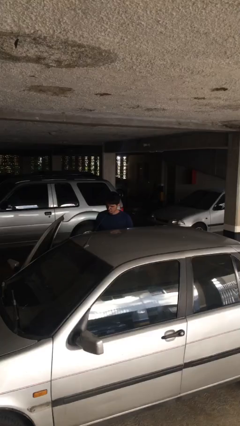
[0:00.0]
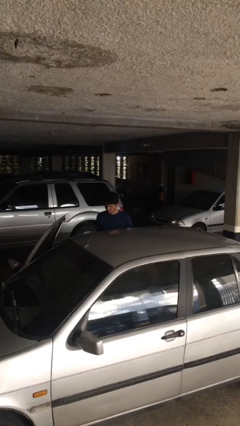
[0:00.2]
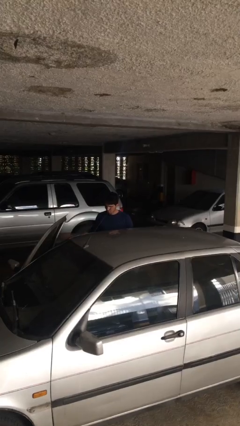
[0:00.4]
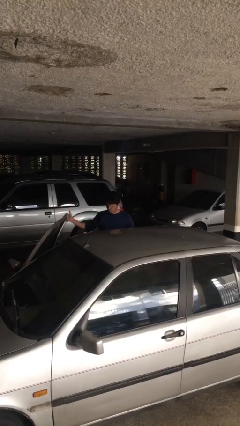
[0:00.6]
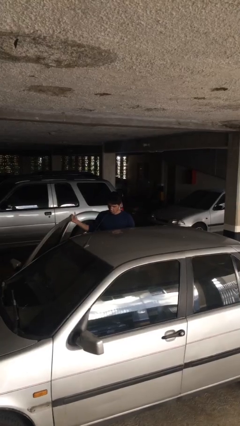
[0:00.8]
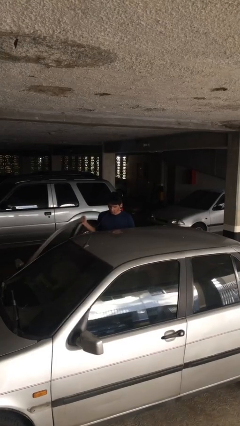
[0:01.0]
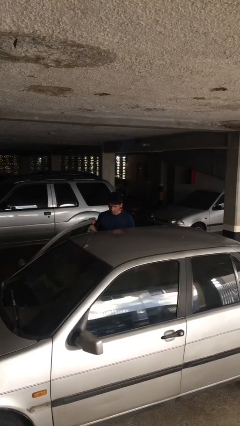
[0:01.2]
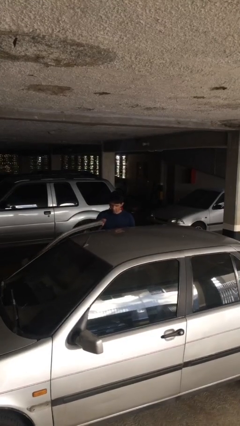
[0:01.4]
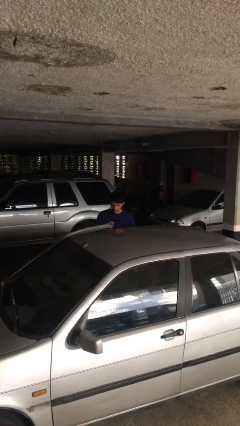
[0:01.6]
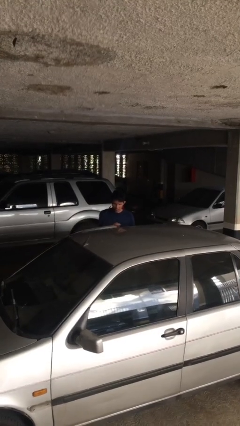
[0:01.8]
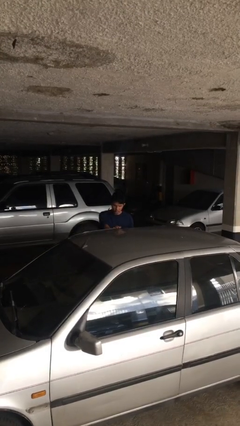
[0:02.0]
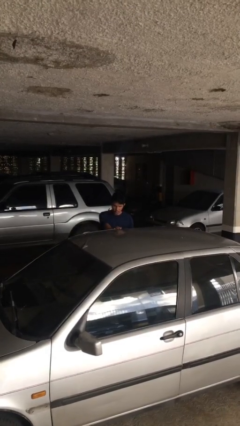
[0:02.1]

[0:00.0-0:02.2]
person closes car door

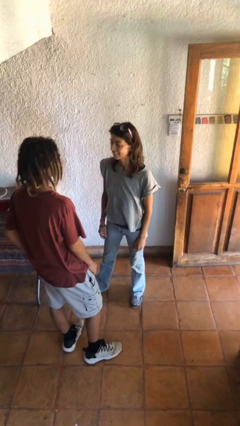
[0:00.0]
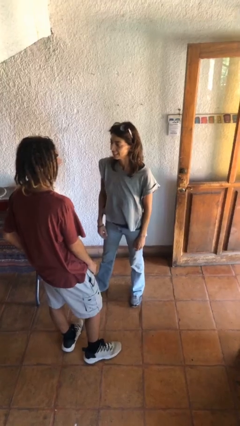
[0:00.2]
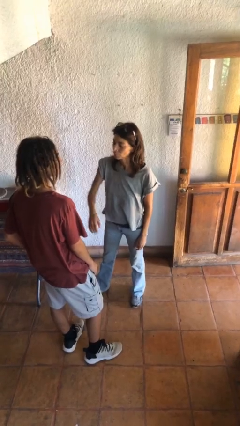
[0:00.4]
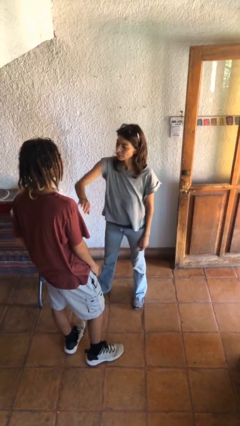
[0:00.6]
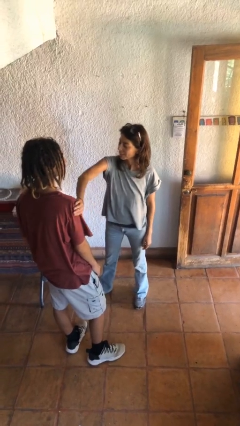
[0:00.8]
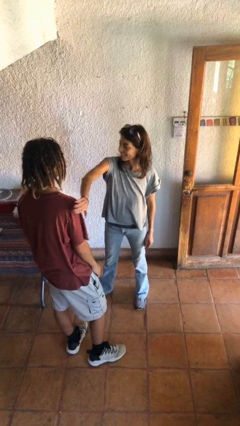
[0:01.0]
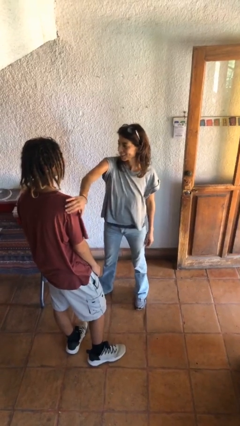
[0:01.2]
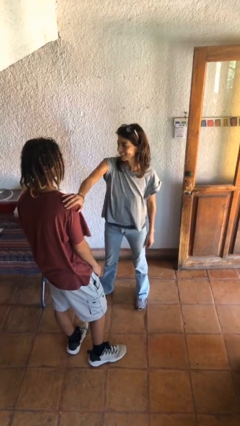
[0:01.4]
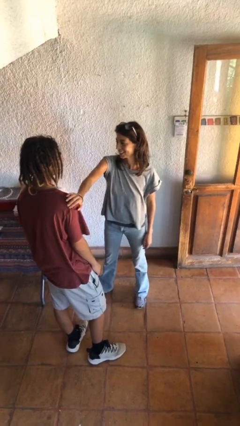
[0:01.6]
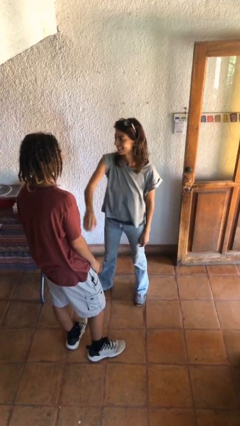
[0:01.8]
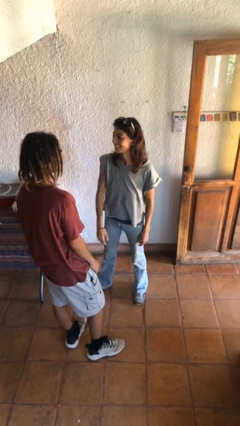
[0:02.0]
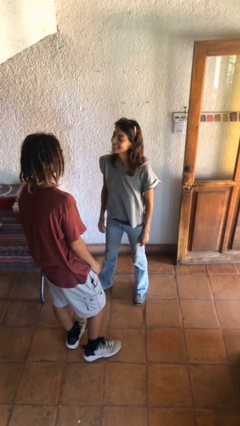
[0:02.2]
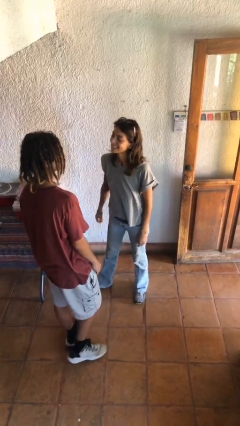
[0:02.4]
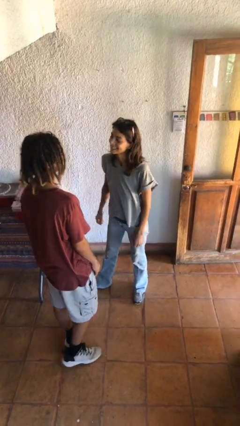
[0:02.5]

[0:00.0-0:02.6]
person pounds shoulders of person

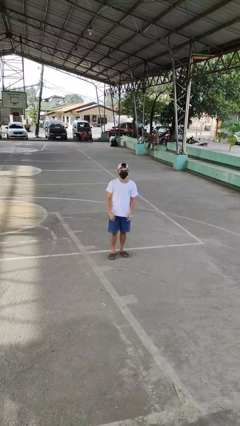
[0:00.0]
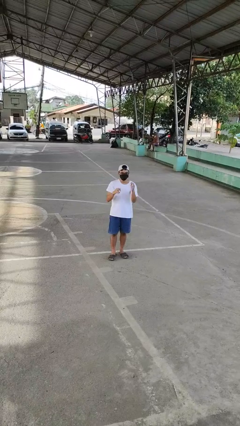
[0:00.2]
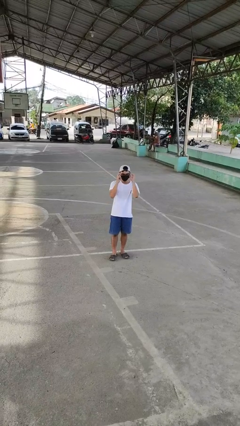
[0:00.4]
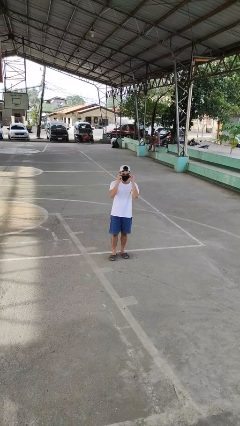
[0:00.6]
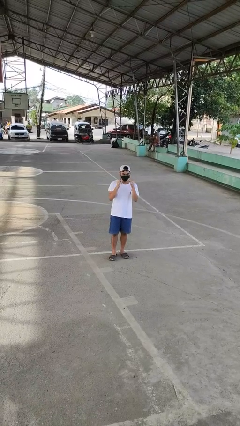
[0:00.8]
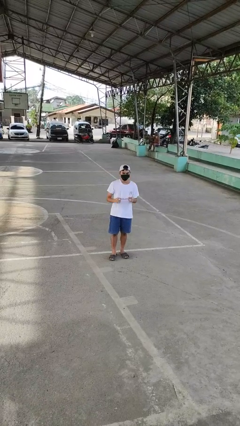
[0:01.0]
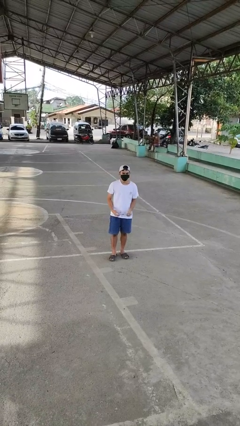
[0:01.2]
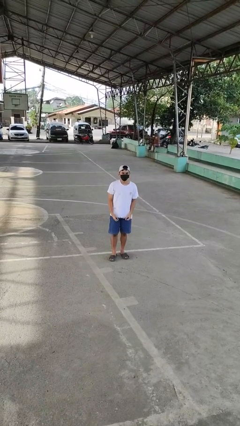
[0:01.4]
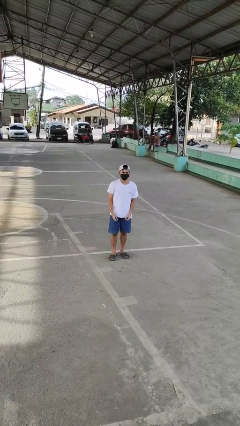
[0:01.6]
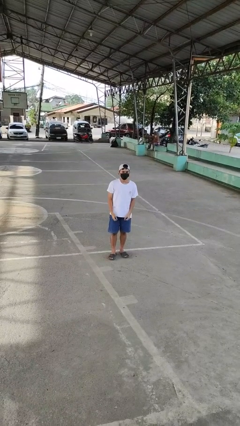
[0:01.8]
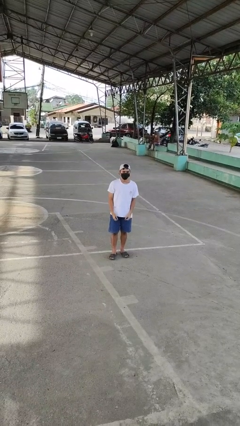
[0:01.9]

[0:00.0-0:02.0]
person takes off glasses

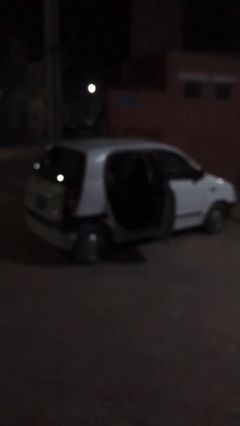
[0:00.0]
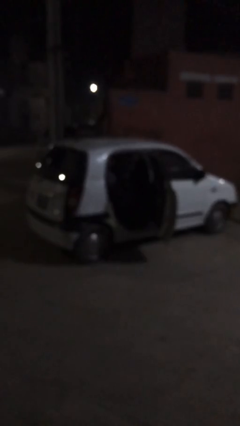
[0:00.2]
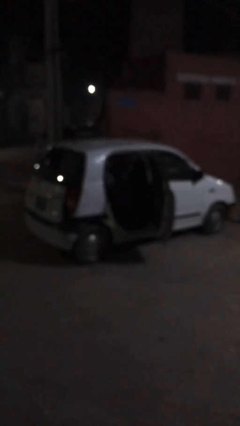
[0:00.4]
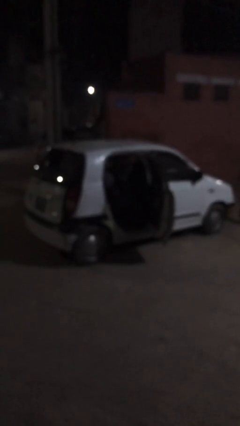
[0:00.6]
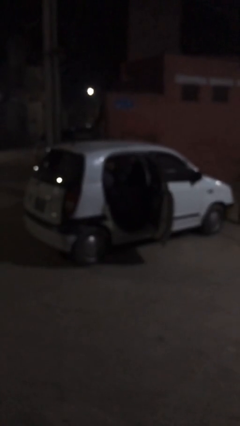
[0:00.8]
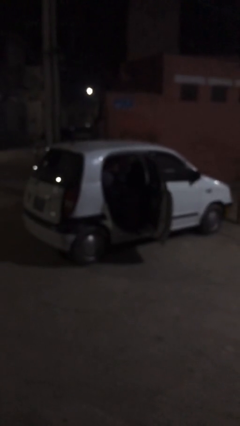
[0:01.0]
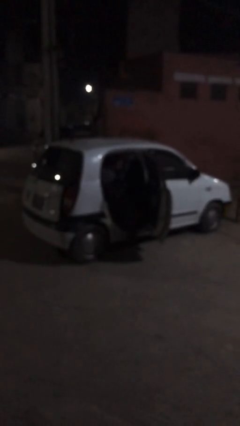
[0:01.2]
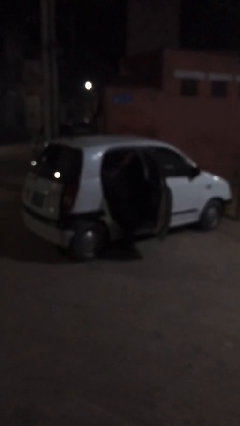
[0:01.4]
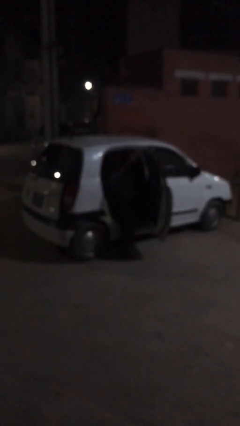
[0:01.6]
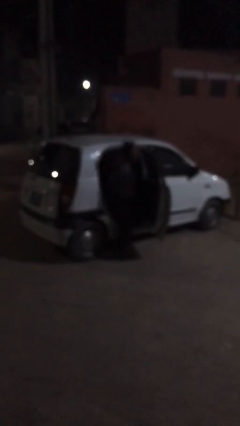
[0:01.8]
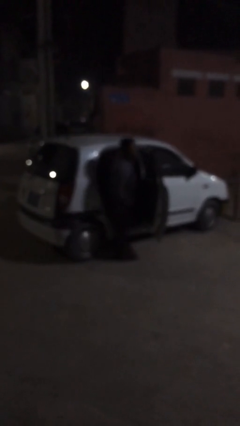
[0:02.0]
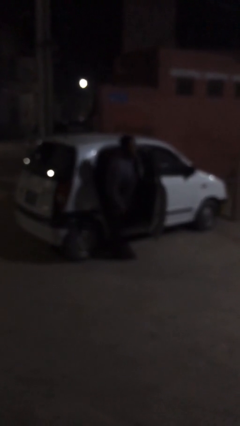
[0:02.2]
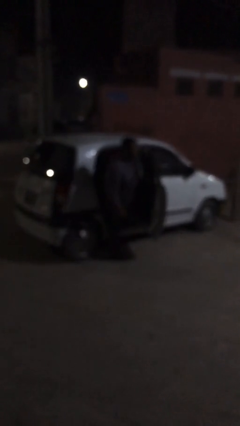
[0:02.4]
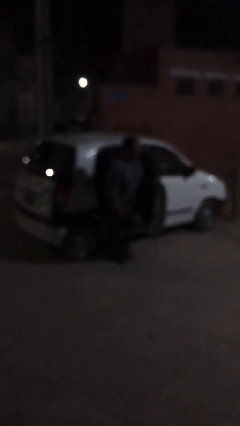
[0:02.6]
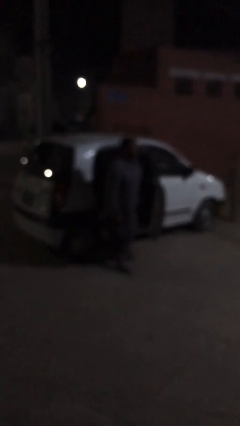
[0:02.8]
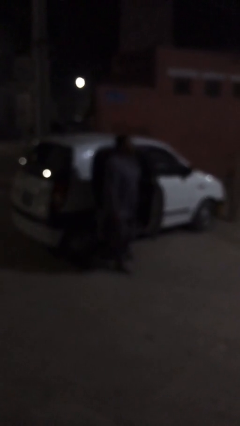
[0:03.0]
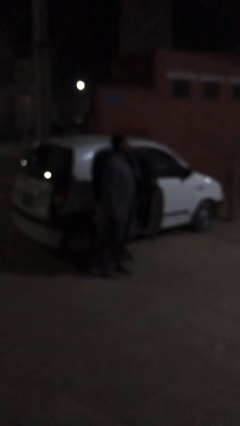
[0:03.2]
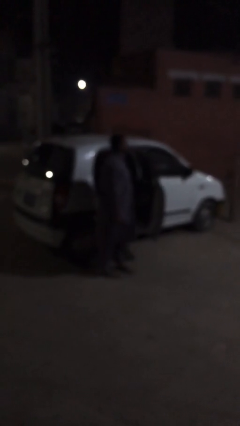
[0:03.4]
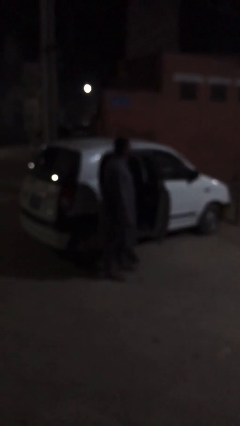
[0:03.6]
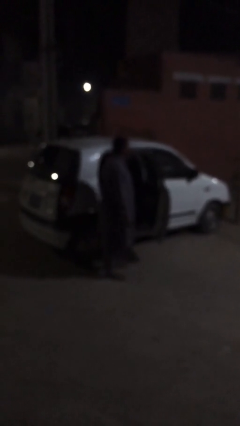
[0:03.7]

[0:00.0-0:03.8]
person exits car

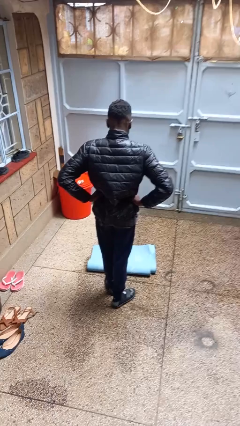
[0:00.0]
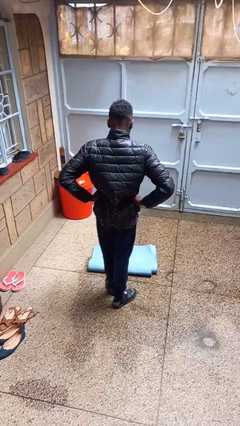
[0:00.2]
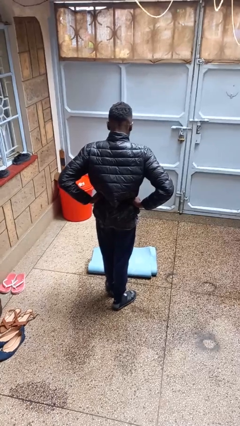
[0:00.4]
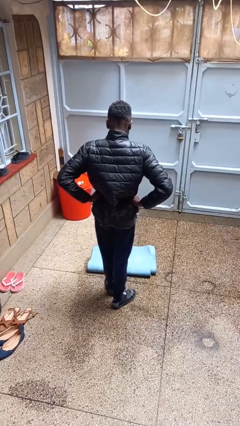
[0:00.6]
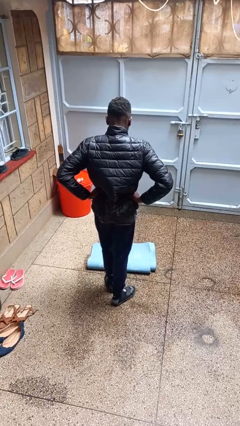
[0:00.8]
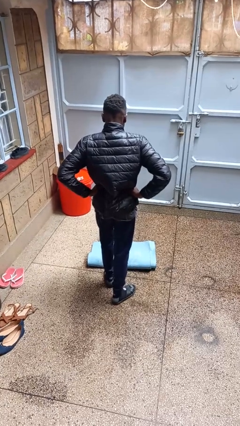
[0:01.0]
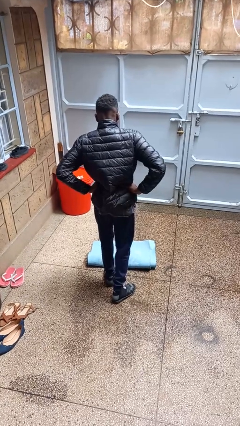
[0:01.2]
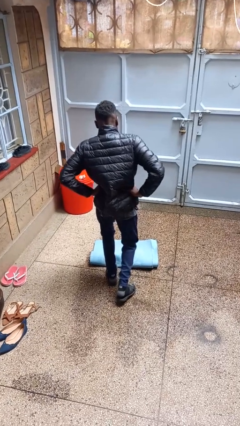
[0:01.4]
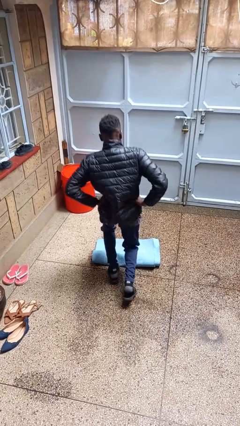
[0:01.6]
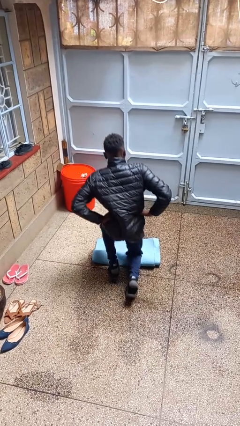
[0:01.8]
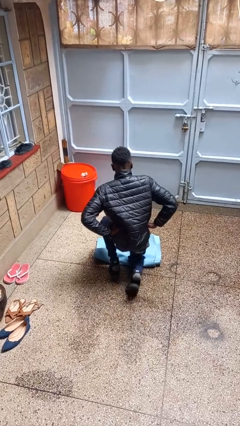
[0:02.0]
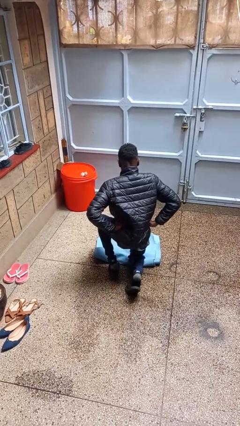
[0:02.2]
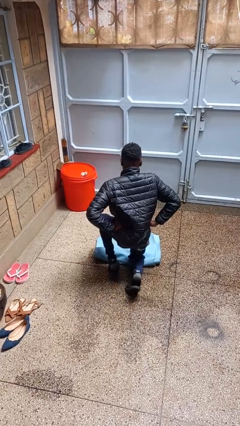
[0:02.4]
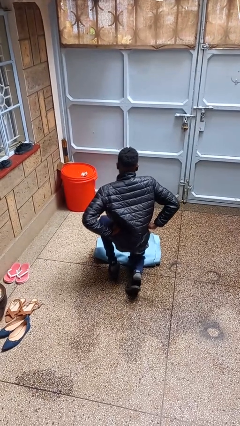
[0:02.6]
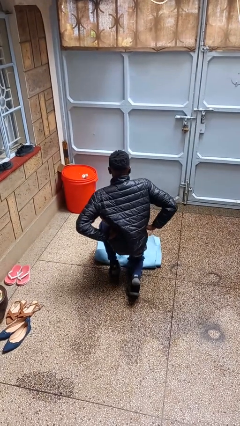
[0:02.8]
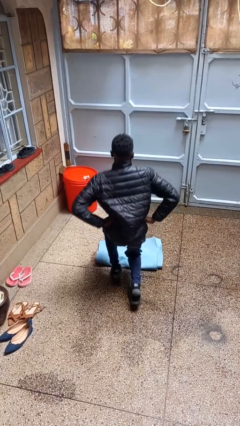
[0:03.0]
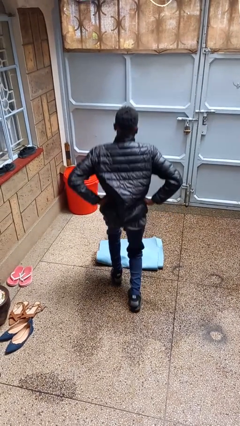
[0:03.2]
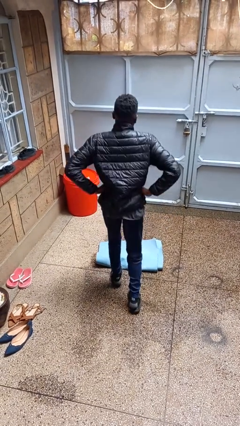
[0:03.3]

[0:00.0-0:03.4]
person exercises with lunges

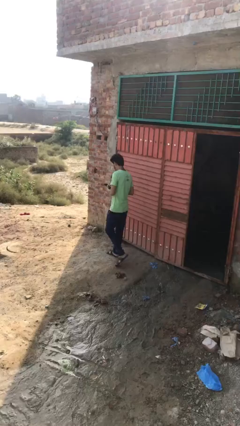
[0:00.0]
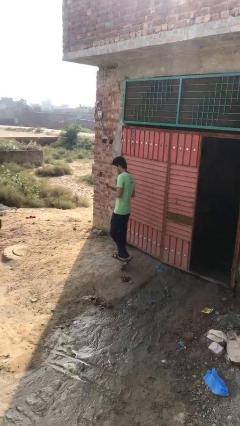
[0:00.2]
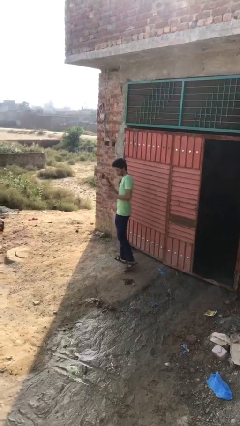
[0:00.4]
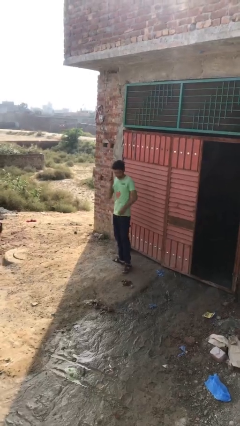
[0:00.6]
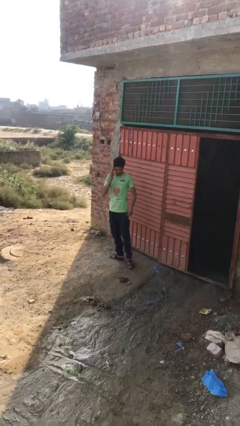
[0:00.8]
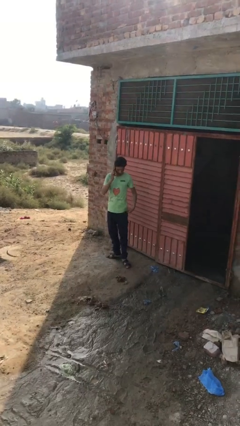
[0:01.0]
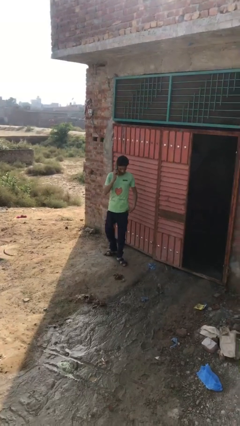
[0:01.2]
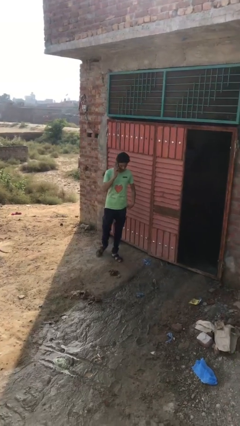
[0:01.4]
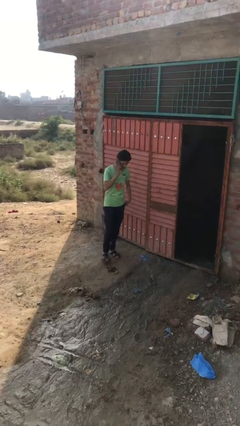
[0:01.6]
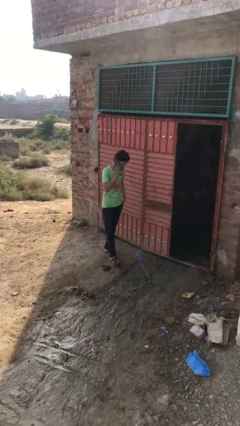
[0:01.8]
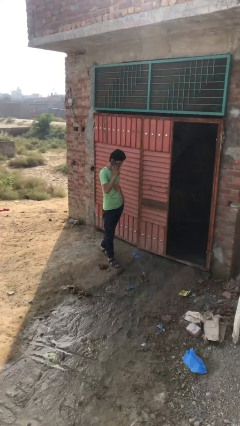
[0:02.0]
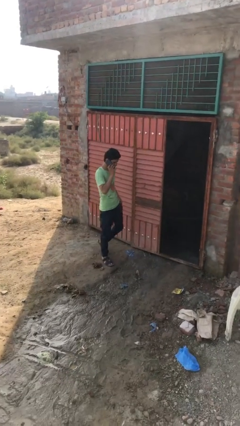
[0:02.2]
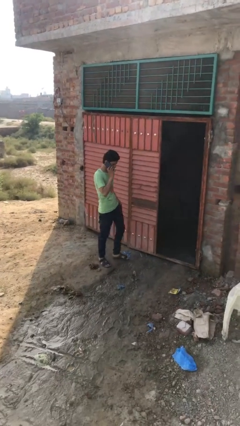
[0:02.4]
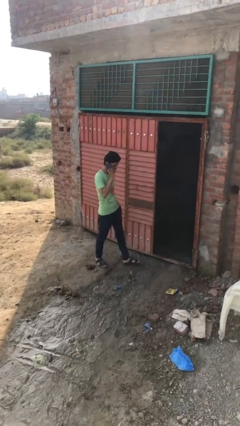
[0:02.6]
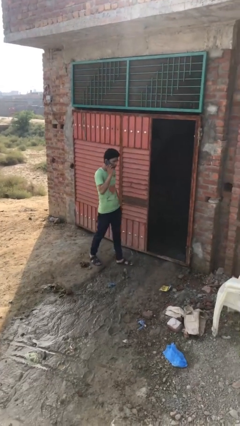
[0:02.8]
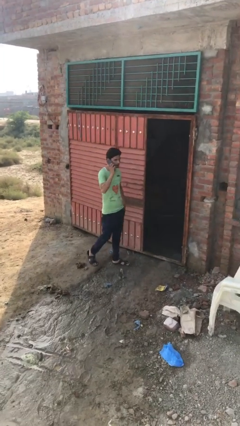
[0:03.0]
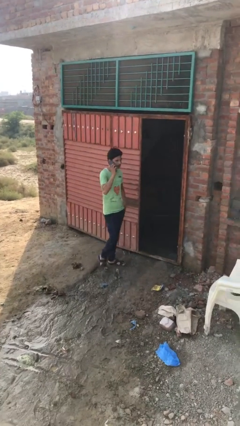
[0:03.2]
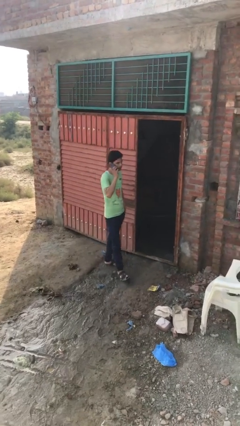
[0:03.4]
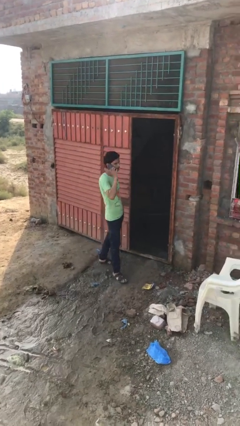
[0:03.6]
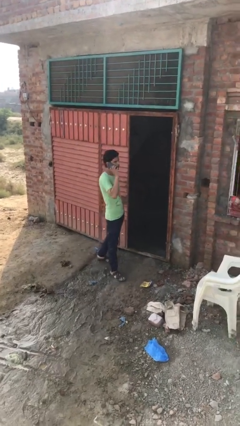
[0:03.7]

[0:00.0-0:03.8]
person talks on phone
